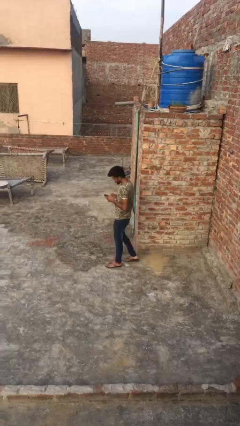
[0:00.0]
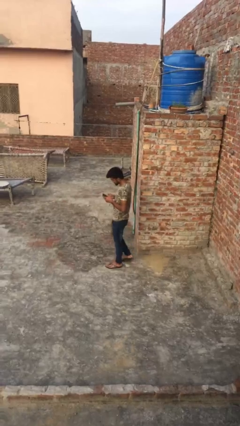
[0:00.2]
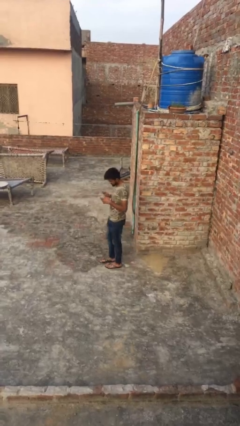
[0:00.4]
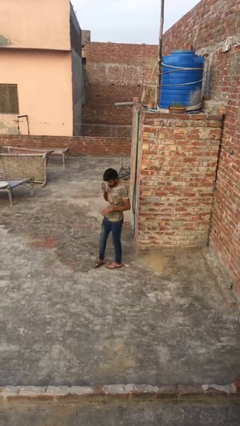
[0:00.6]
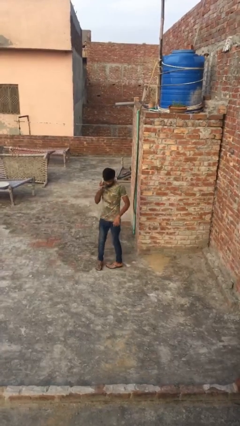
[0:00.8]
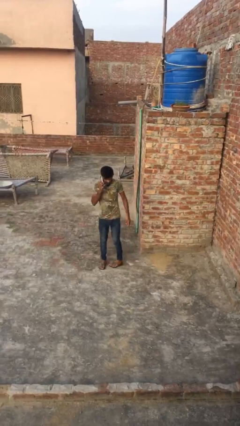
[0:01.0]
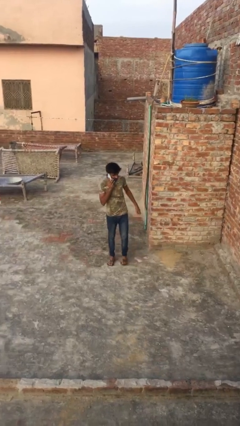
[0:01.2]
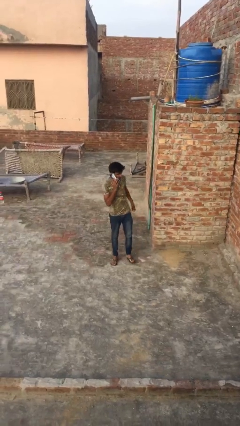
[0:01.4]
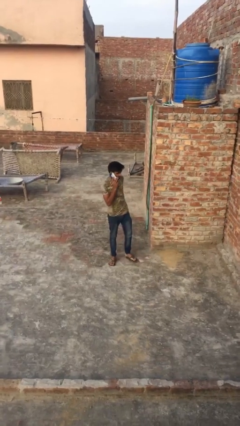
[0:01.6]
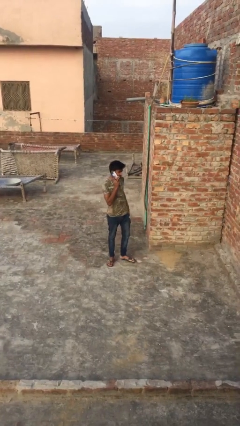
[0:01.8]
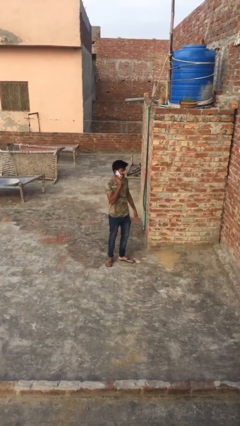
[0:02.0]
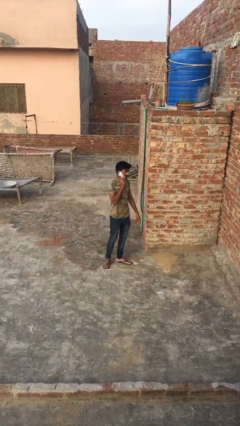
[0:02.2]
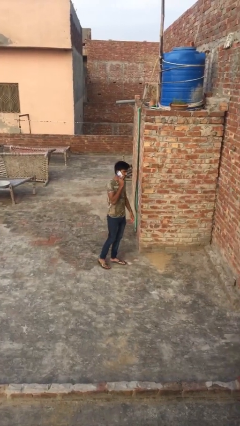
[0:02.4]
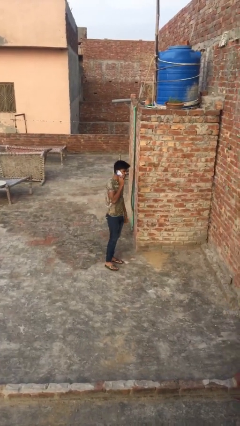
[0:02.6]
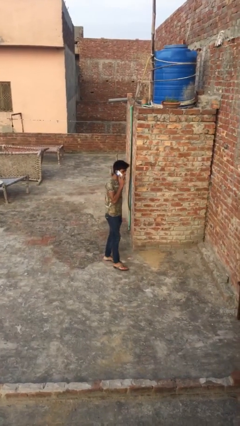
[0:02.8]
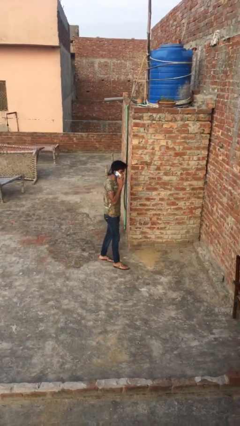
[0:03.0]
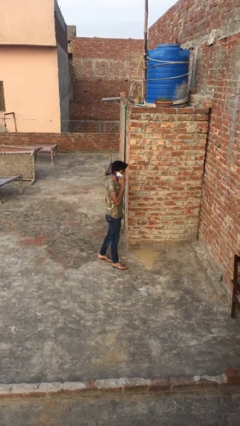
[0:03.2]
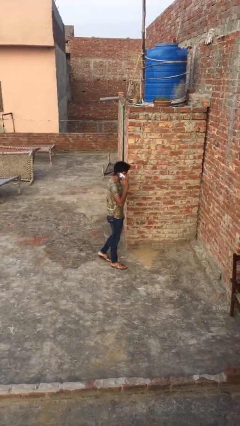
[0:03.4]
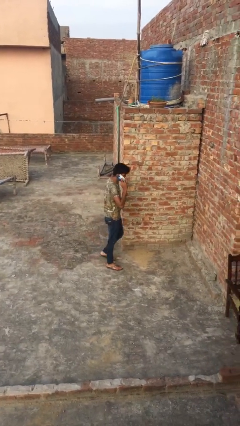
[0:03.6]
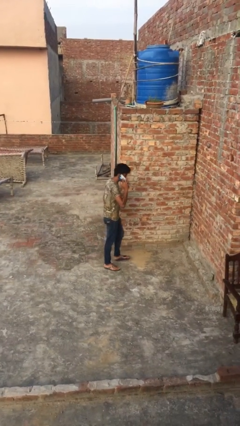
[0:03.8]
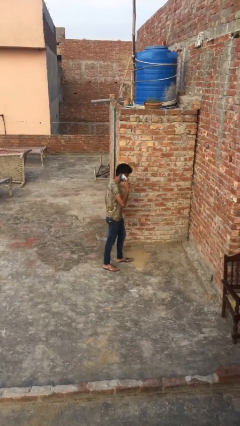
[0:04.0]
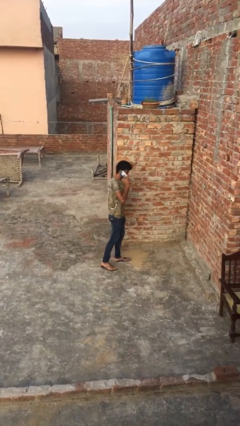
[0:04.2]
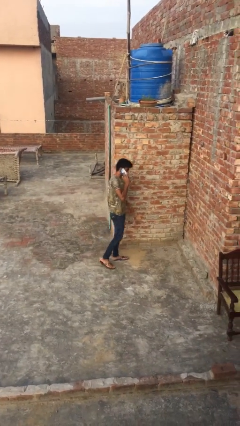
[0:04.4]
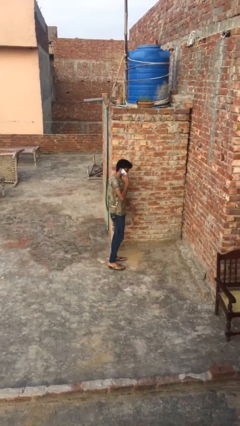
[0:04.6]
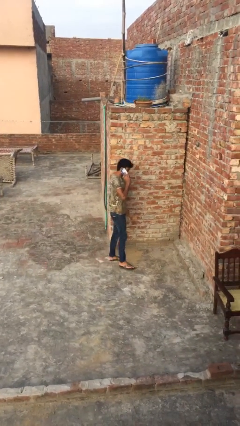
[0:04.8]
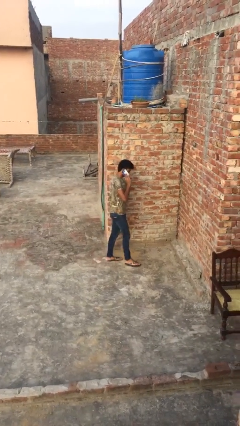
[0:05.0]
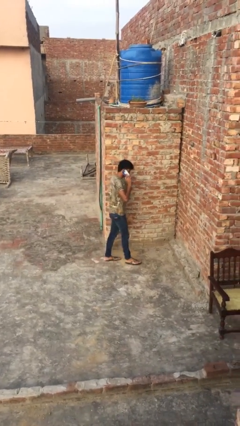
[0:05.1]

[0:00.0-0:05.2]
person talks on phone

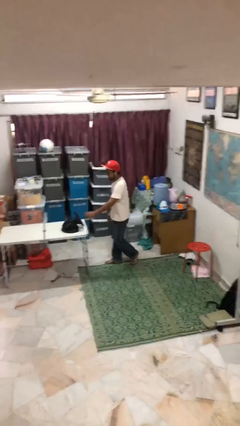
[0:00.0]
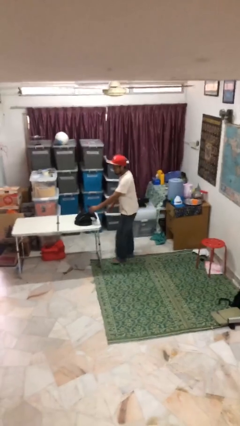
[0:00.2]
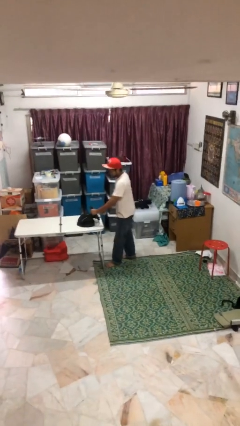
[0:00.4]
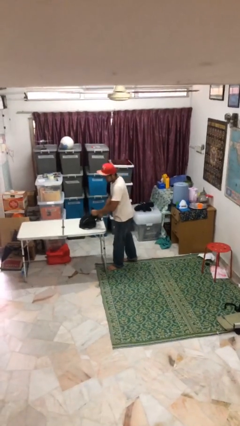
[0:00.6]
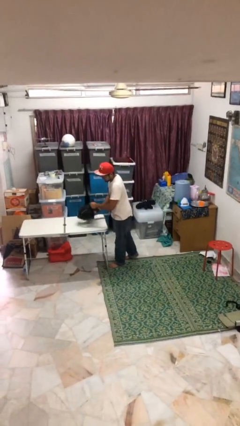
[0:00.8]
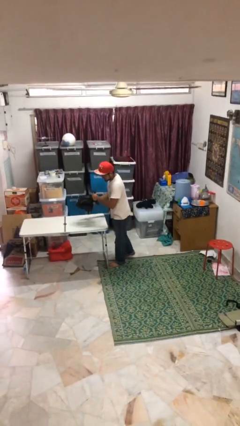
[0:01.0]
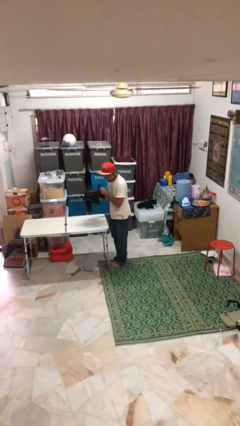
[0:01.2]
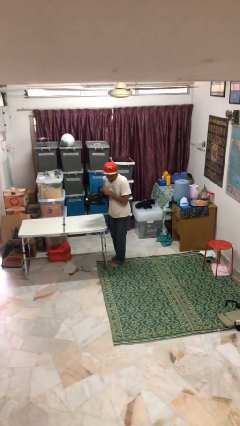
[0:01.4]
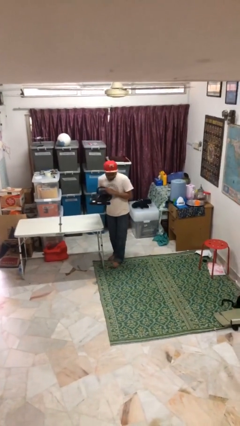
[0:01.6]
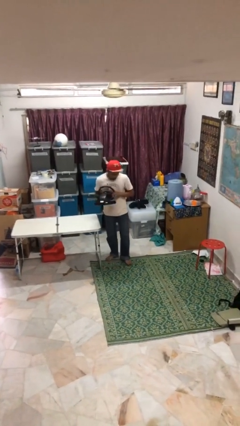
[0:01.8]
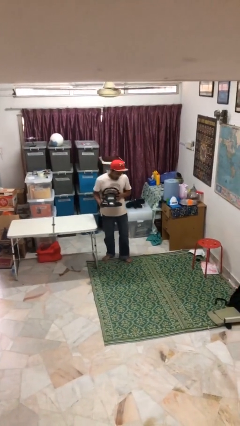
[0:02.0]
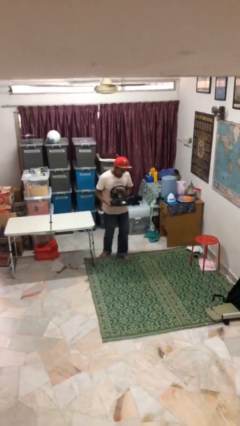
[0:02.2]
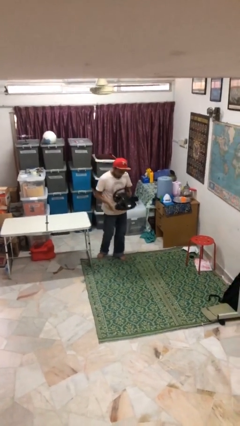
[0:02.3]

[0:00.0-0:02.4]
person picks up object from table

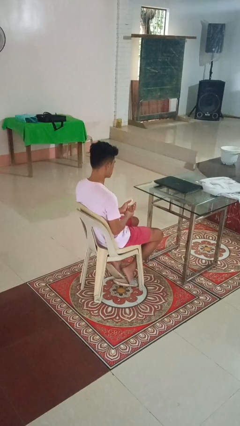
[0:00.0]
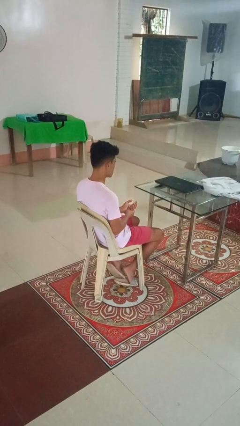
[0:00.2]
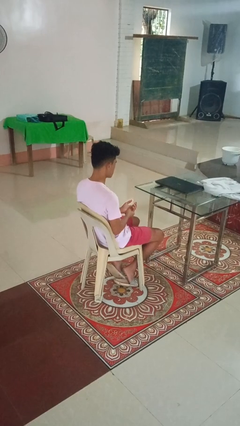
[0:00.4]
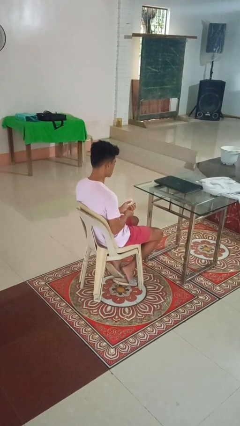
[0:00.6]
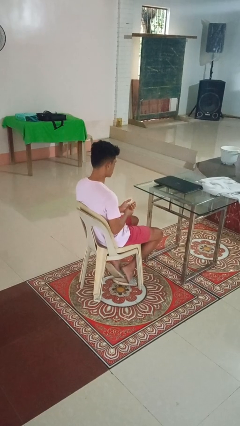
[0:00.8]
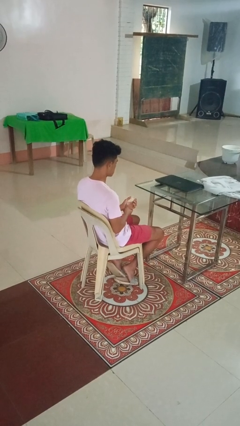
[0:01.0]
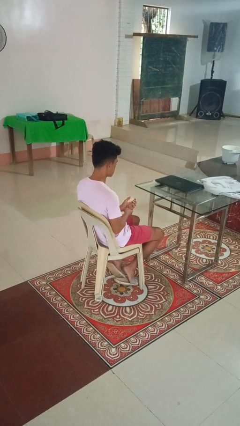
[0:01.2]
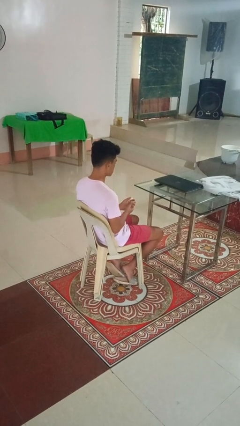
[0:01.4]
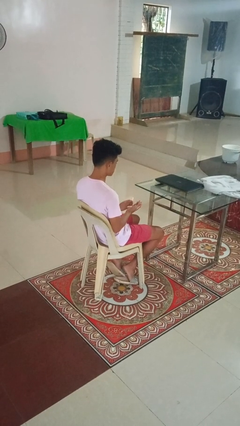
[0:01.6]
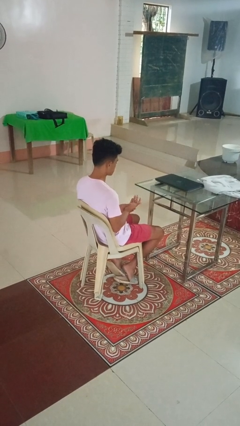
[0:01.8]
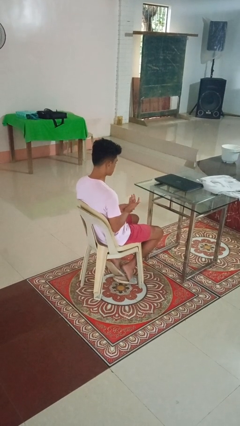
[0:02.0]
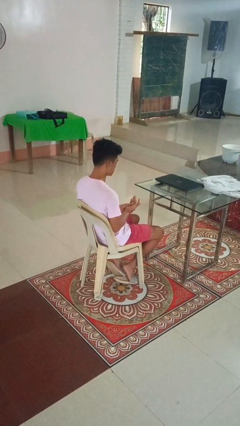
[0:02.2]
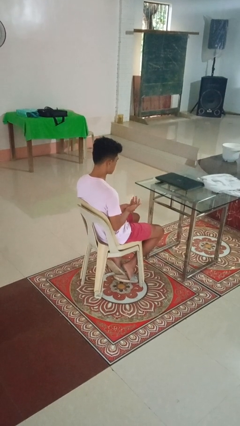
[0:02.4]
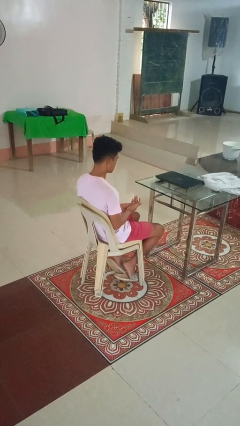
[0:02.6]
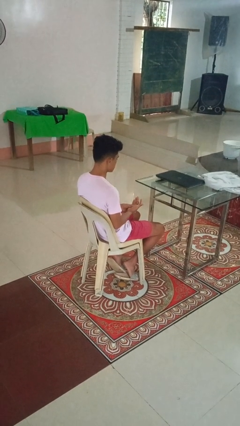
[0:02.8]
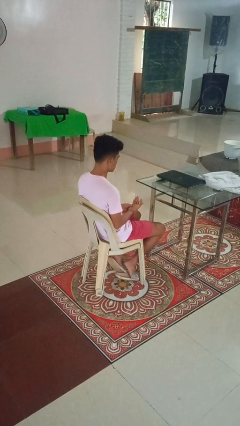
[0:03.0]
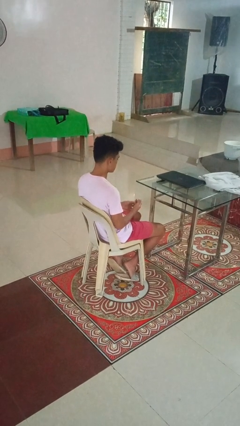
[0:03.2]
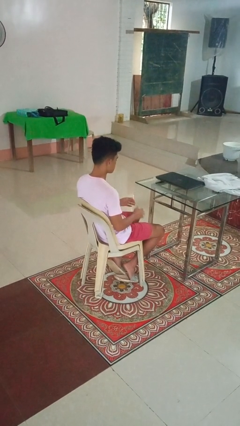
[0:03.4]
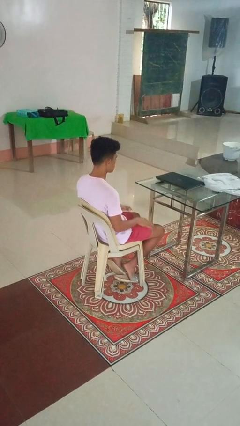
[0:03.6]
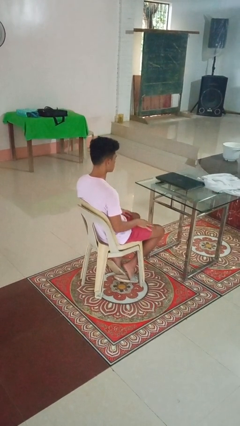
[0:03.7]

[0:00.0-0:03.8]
person looks at hands in lap

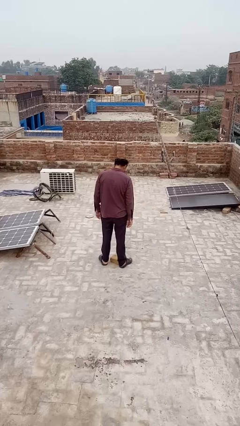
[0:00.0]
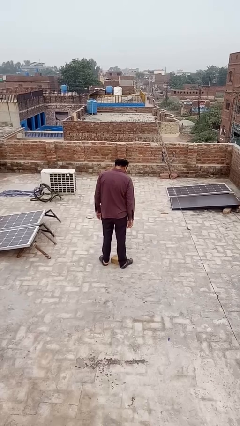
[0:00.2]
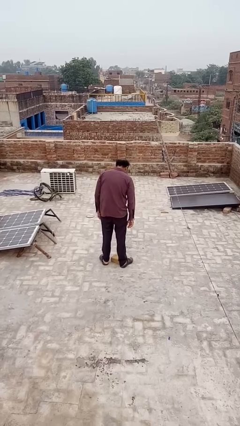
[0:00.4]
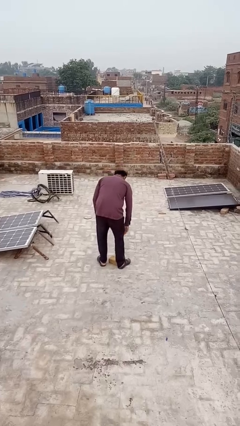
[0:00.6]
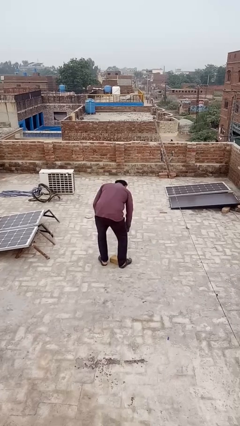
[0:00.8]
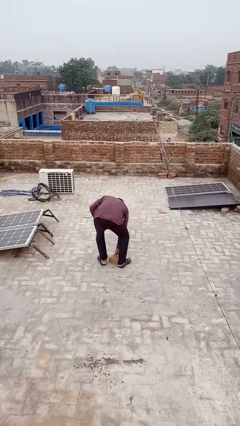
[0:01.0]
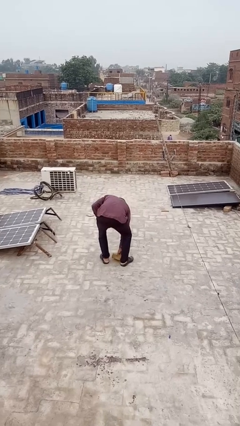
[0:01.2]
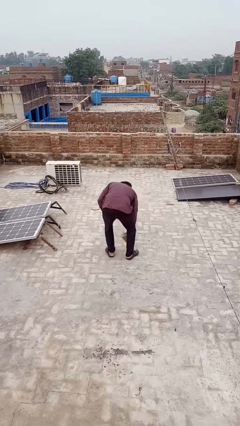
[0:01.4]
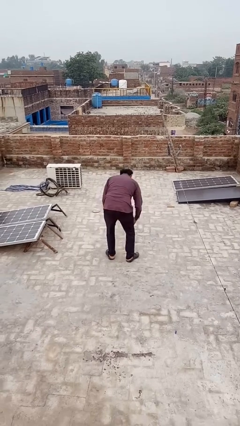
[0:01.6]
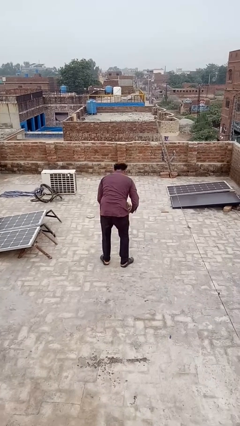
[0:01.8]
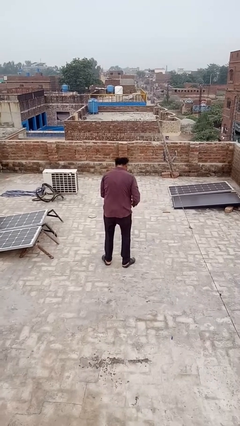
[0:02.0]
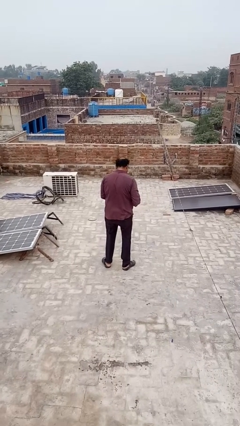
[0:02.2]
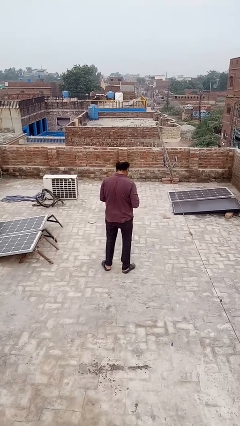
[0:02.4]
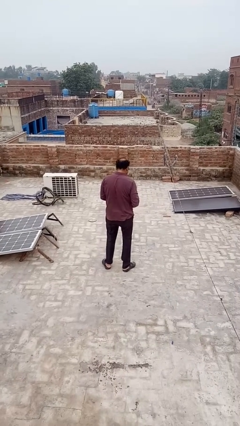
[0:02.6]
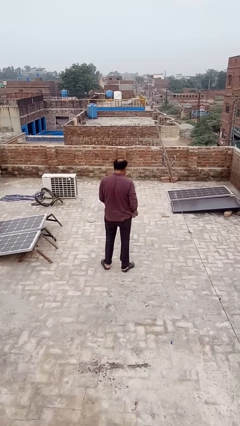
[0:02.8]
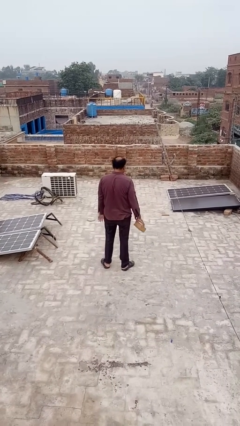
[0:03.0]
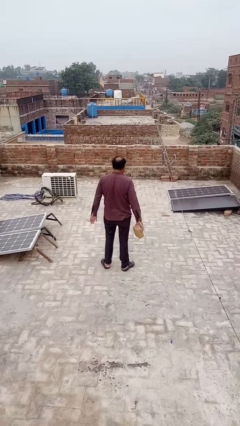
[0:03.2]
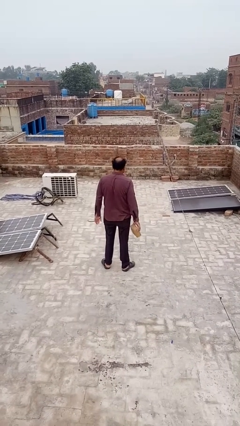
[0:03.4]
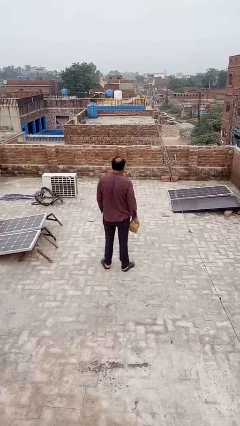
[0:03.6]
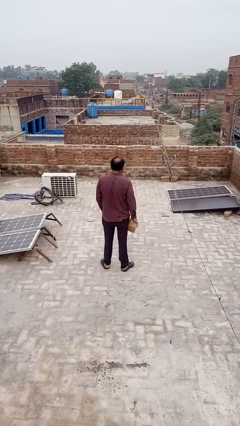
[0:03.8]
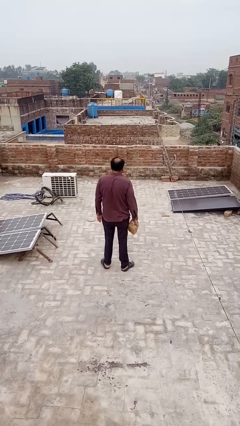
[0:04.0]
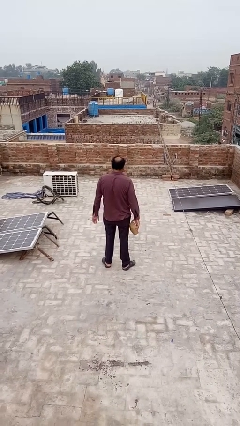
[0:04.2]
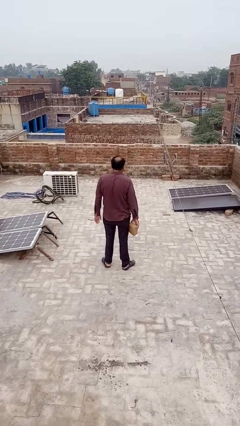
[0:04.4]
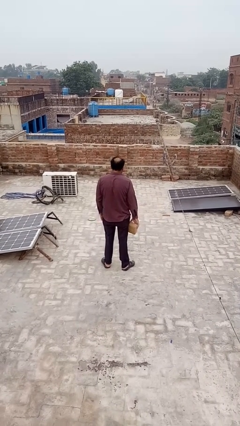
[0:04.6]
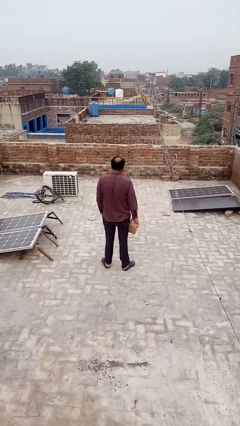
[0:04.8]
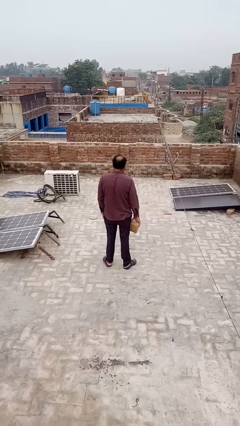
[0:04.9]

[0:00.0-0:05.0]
person picks up object from floor

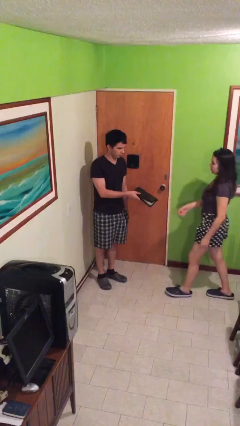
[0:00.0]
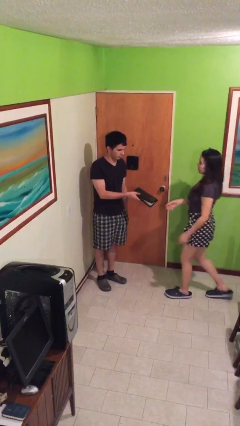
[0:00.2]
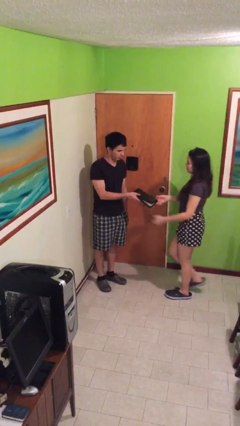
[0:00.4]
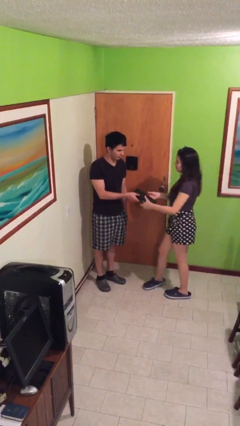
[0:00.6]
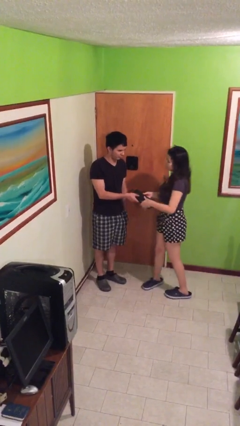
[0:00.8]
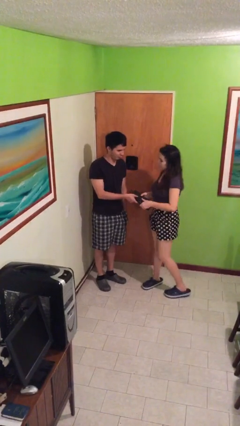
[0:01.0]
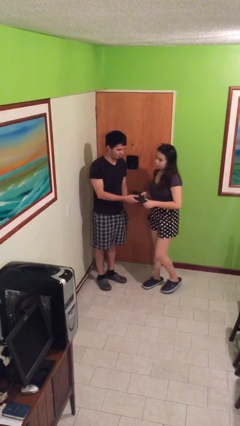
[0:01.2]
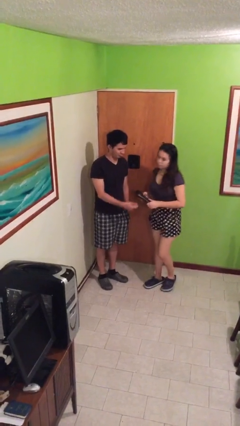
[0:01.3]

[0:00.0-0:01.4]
person transfers object to person
